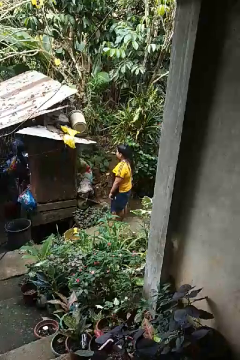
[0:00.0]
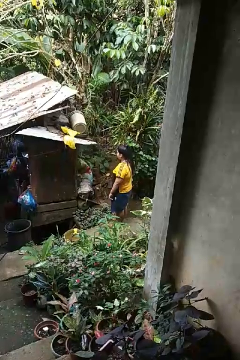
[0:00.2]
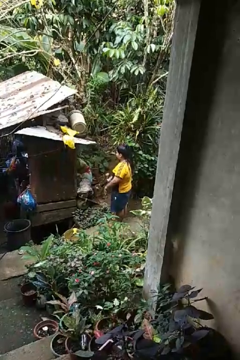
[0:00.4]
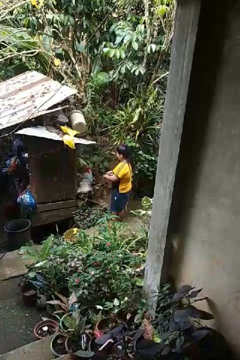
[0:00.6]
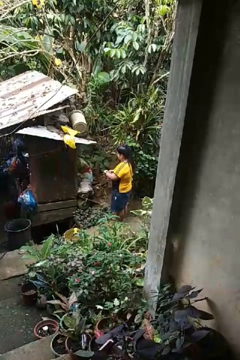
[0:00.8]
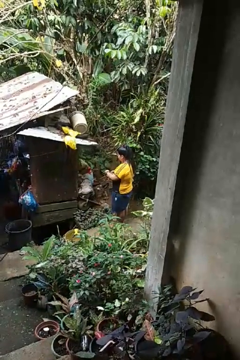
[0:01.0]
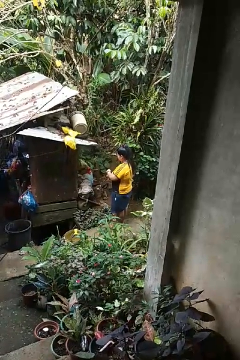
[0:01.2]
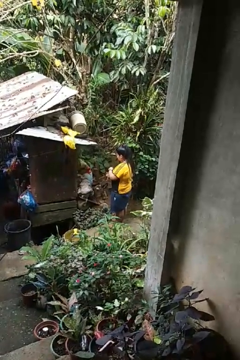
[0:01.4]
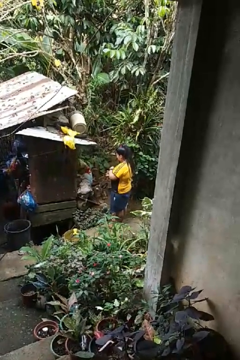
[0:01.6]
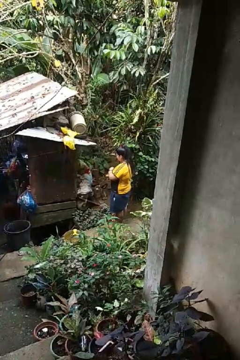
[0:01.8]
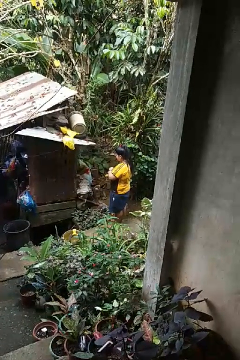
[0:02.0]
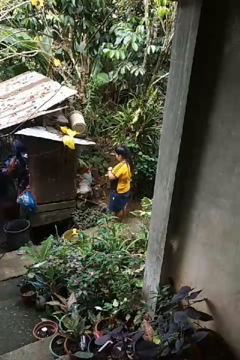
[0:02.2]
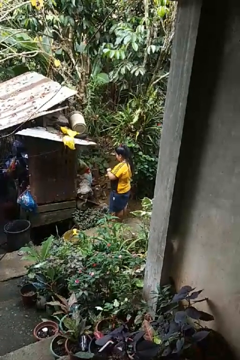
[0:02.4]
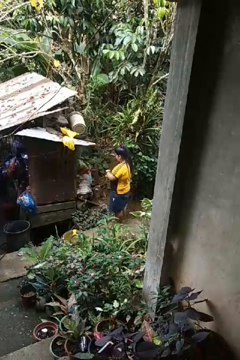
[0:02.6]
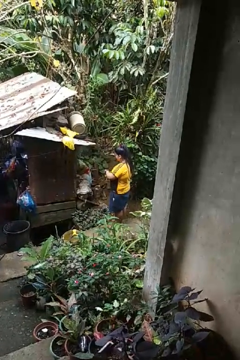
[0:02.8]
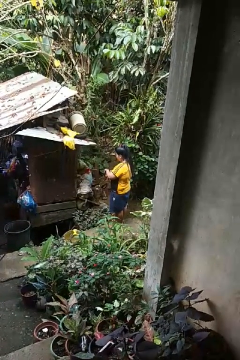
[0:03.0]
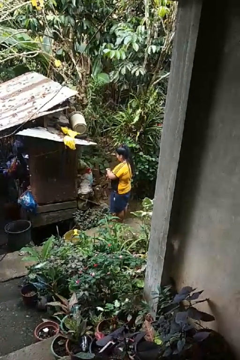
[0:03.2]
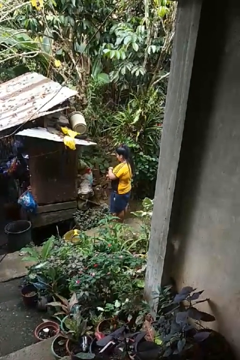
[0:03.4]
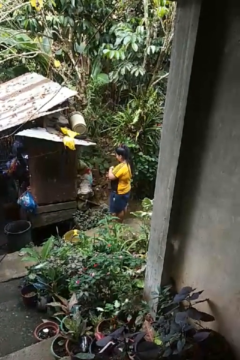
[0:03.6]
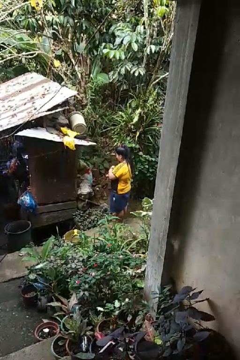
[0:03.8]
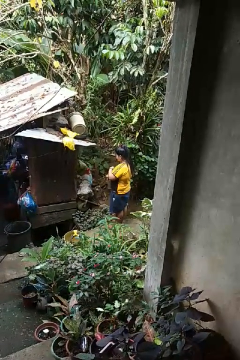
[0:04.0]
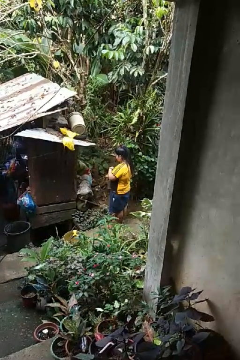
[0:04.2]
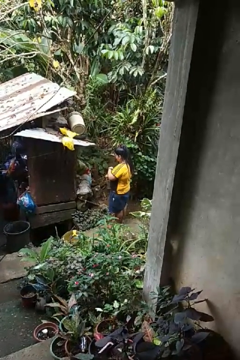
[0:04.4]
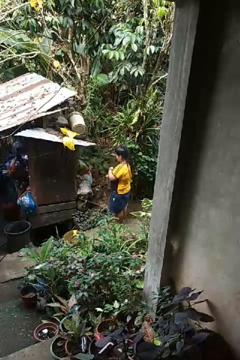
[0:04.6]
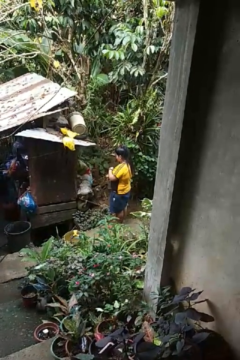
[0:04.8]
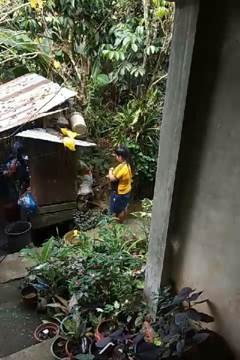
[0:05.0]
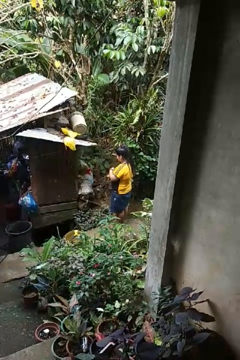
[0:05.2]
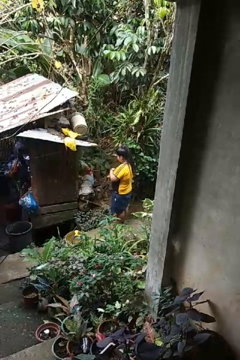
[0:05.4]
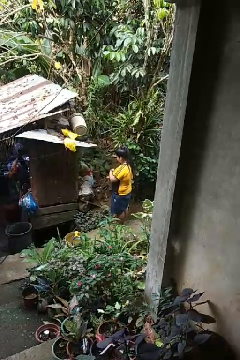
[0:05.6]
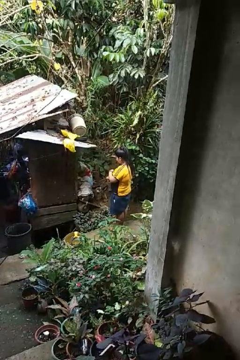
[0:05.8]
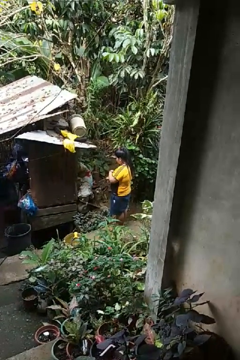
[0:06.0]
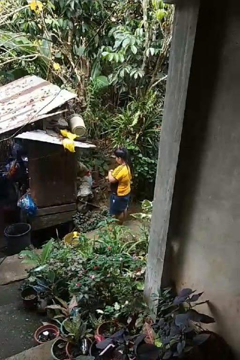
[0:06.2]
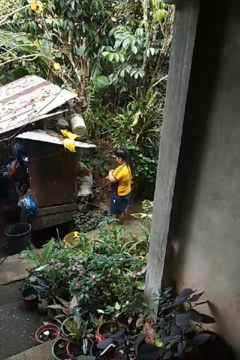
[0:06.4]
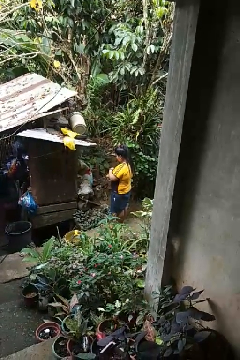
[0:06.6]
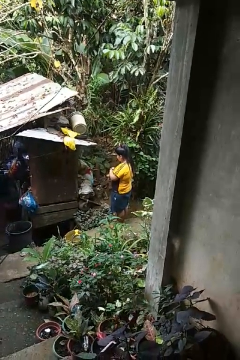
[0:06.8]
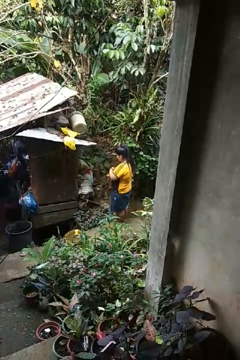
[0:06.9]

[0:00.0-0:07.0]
person puts on wristwatch

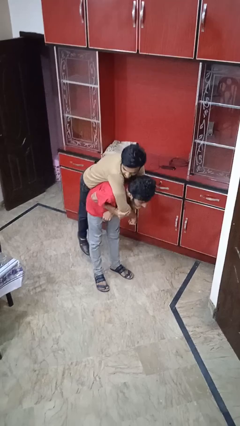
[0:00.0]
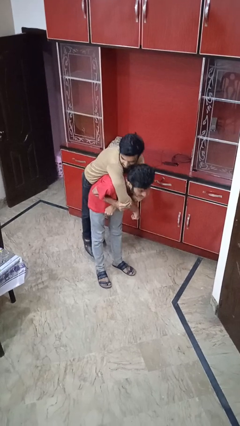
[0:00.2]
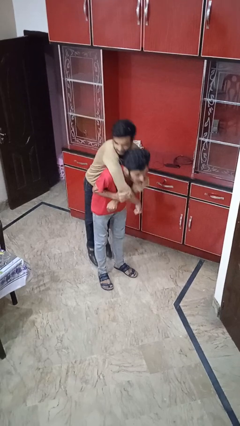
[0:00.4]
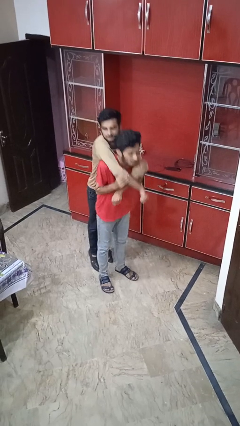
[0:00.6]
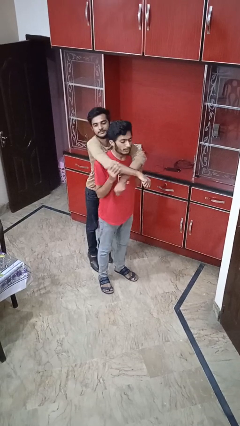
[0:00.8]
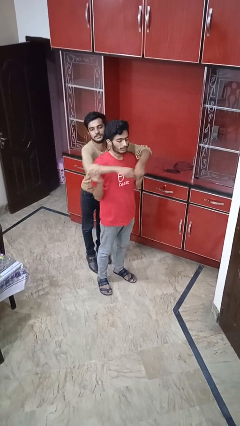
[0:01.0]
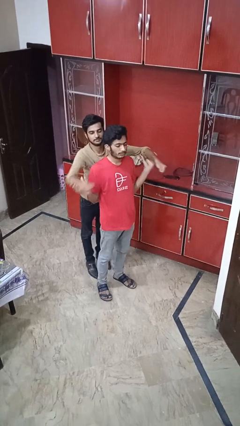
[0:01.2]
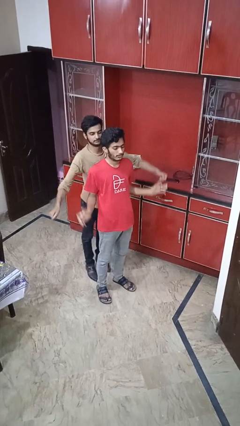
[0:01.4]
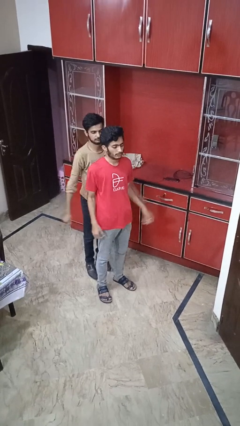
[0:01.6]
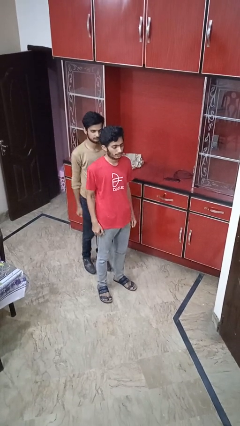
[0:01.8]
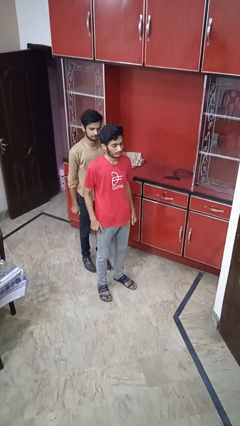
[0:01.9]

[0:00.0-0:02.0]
person puts down person

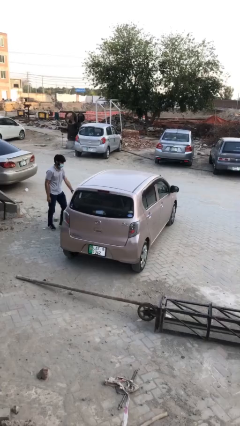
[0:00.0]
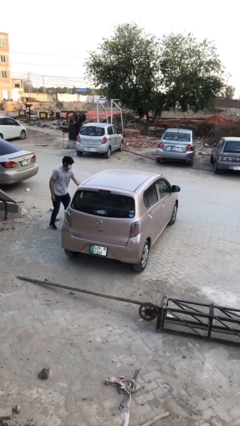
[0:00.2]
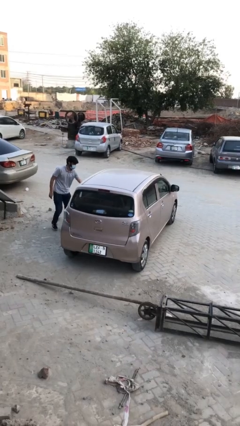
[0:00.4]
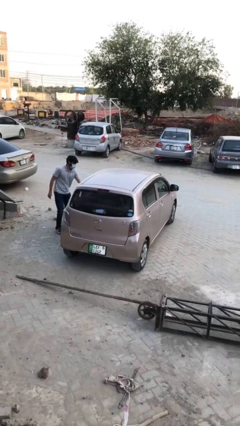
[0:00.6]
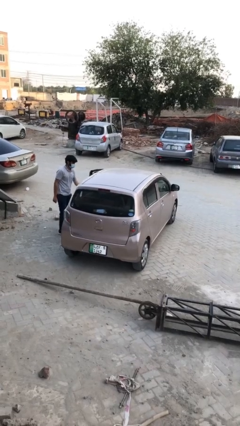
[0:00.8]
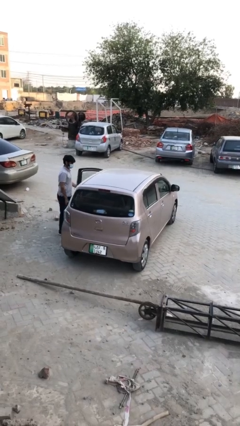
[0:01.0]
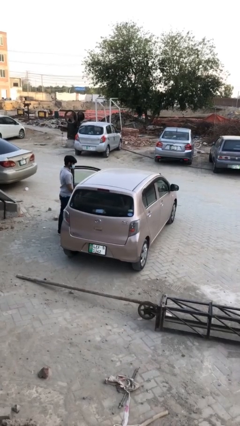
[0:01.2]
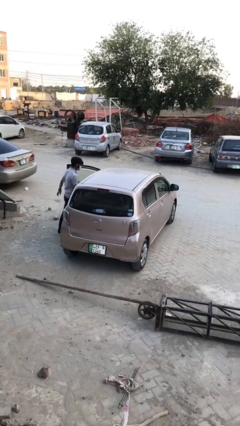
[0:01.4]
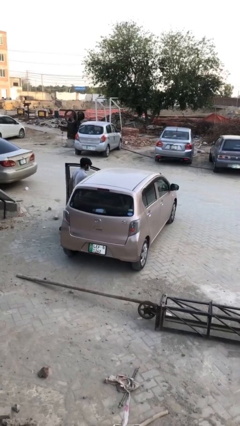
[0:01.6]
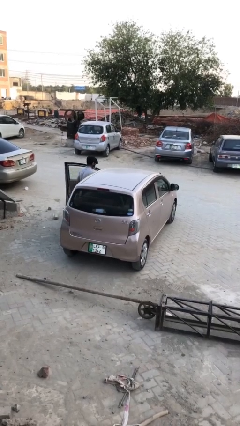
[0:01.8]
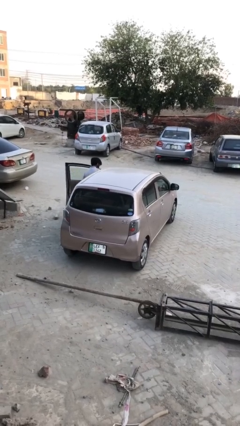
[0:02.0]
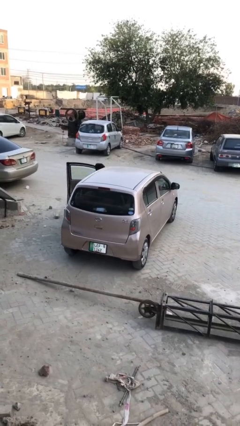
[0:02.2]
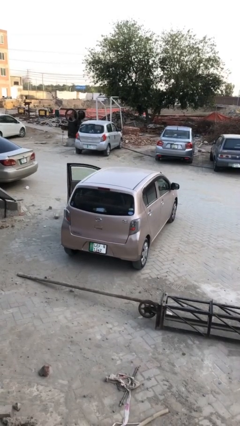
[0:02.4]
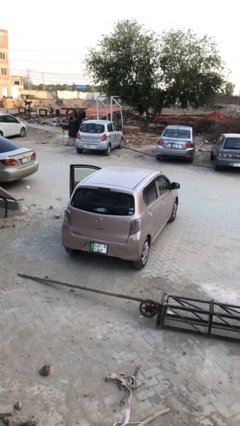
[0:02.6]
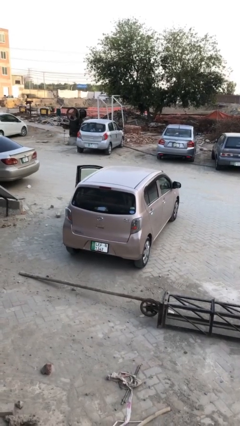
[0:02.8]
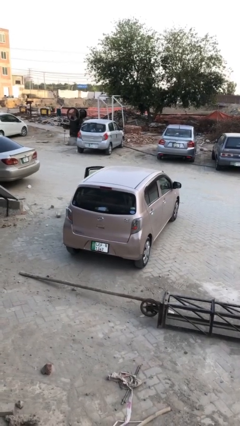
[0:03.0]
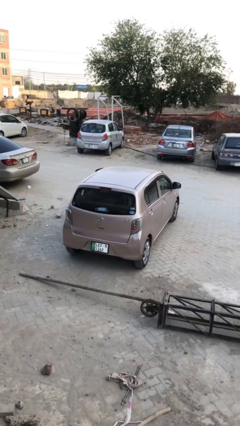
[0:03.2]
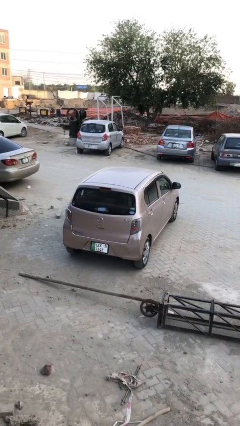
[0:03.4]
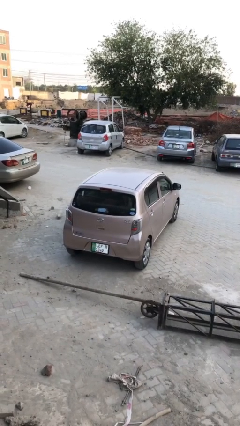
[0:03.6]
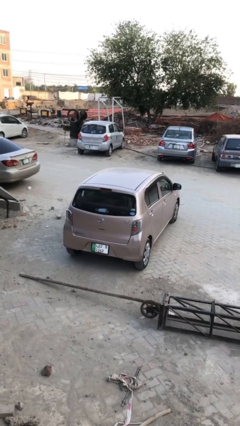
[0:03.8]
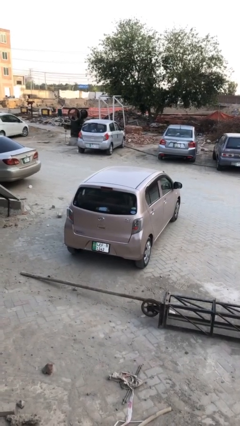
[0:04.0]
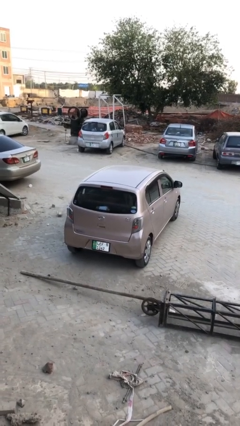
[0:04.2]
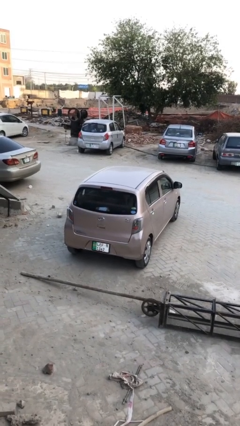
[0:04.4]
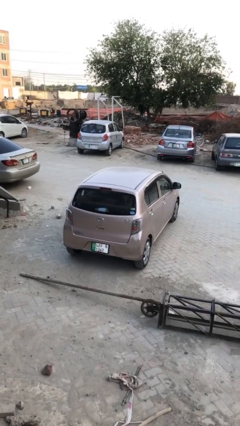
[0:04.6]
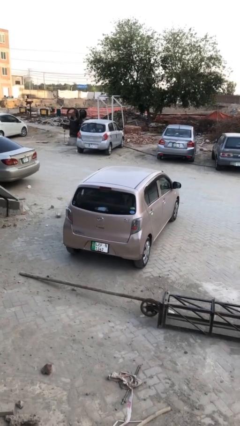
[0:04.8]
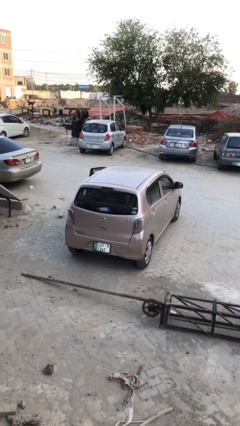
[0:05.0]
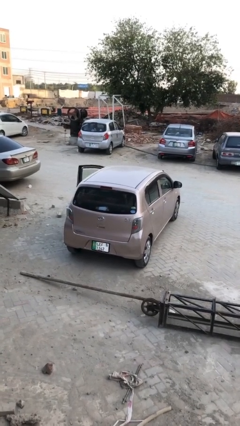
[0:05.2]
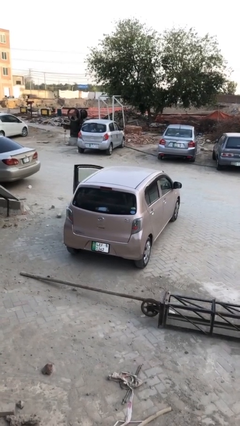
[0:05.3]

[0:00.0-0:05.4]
car picks up person

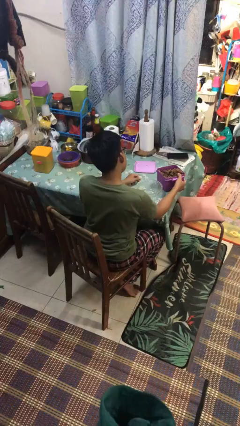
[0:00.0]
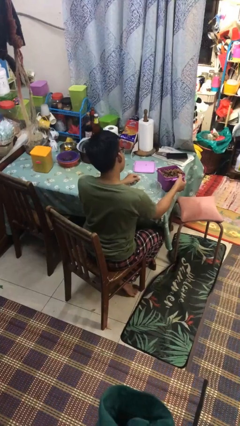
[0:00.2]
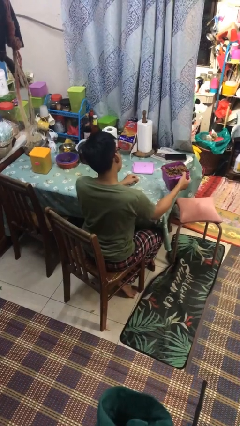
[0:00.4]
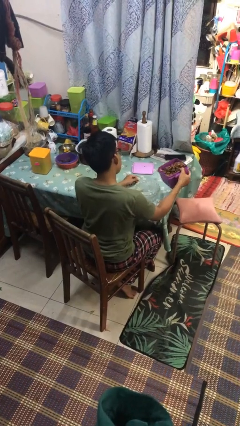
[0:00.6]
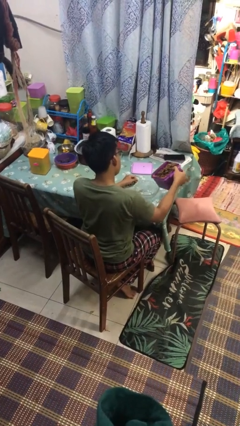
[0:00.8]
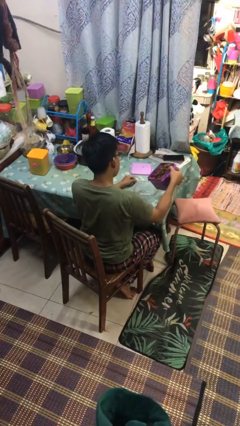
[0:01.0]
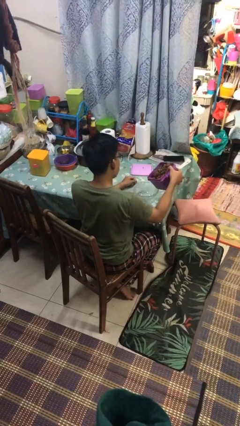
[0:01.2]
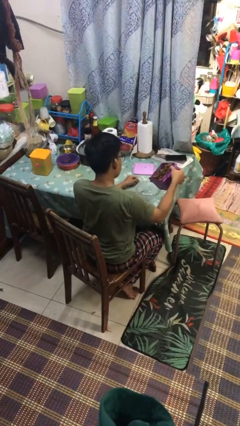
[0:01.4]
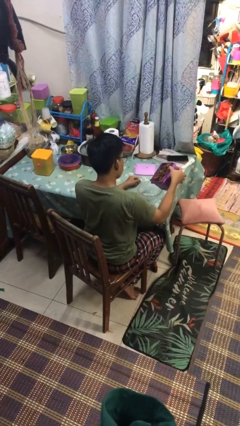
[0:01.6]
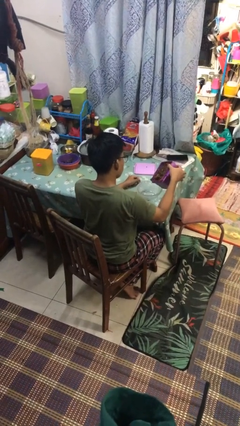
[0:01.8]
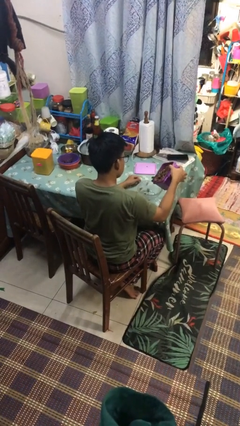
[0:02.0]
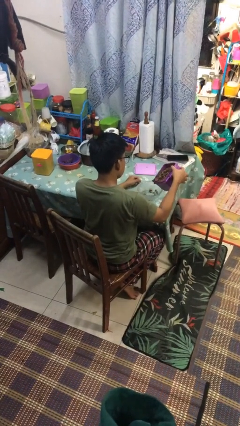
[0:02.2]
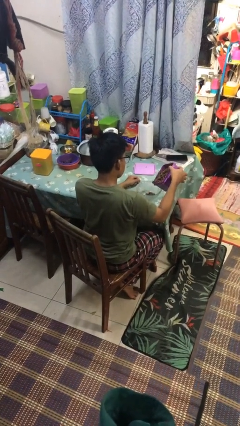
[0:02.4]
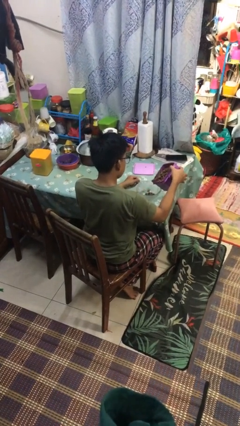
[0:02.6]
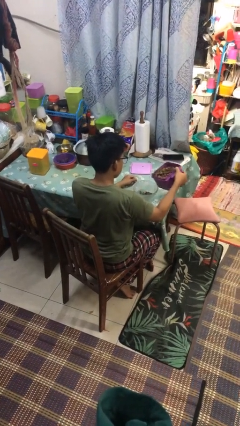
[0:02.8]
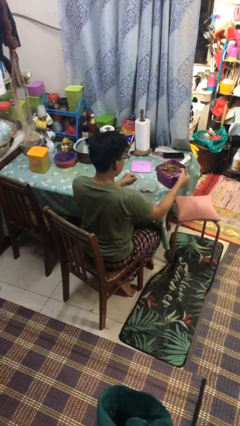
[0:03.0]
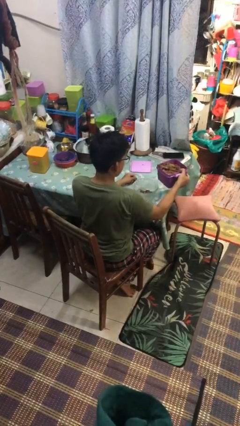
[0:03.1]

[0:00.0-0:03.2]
person pours into bowl

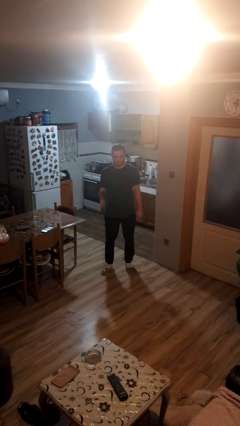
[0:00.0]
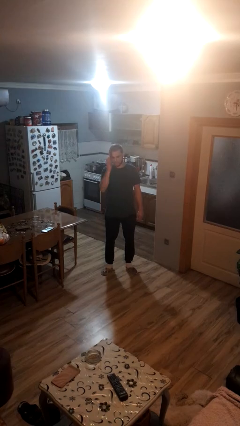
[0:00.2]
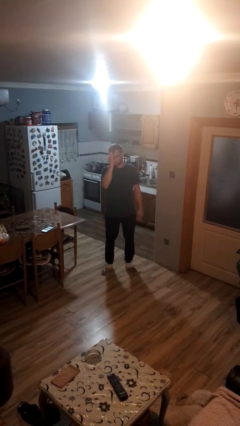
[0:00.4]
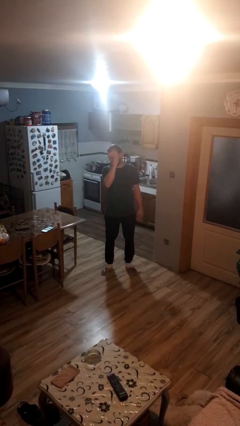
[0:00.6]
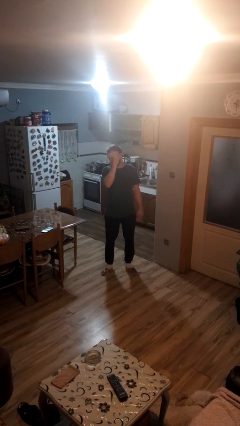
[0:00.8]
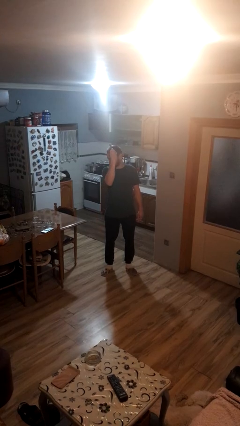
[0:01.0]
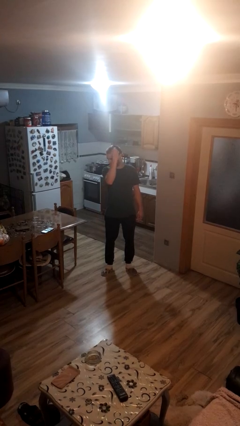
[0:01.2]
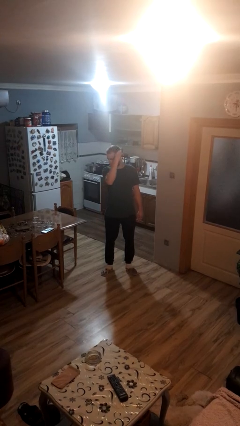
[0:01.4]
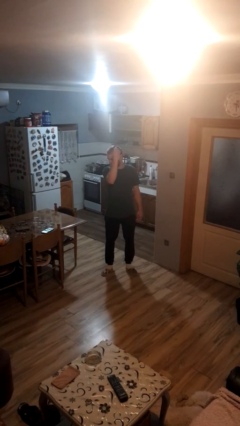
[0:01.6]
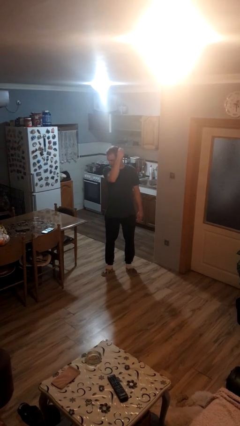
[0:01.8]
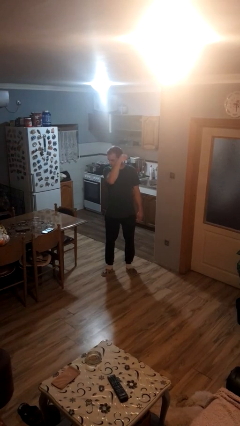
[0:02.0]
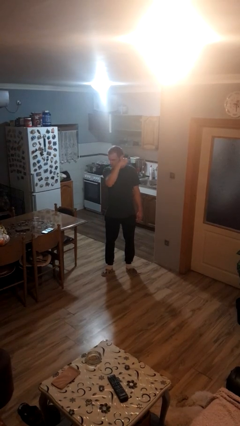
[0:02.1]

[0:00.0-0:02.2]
person brushes hair
